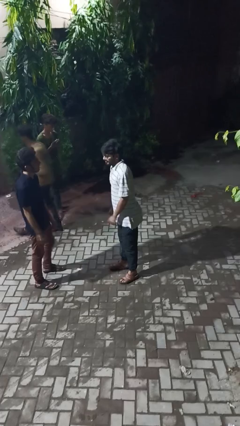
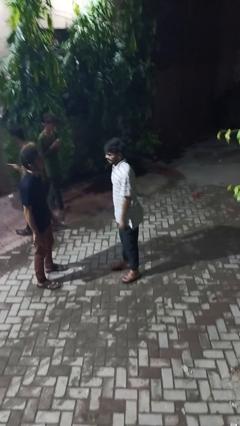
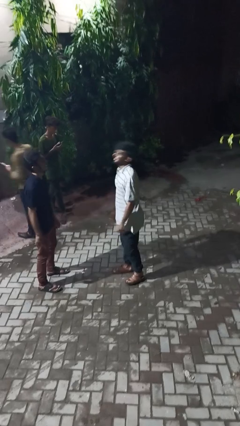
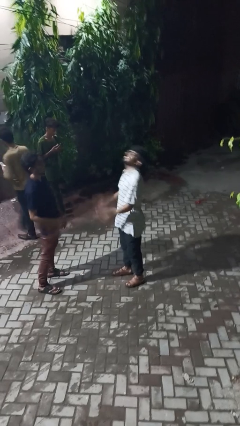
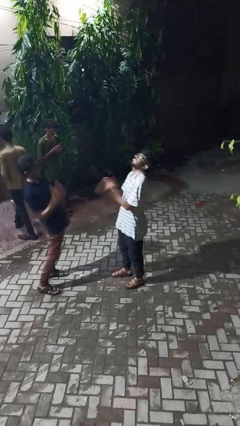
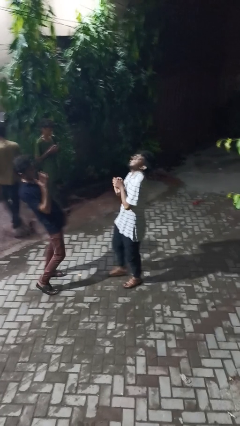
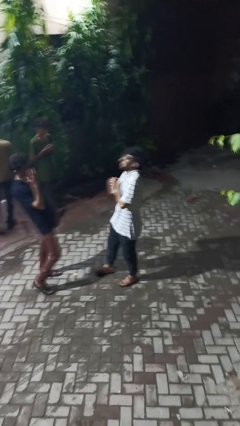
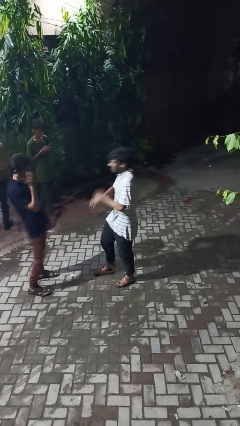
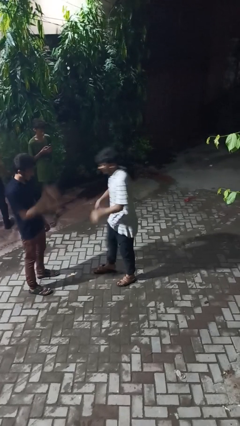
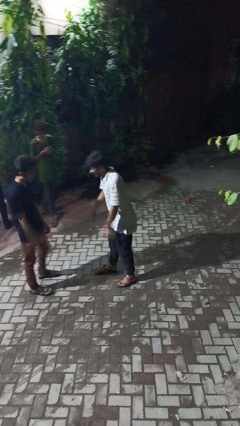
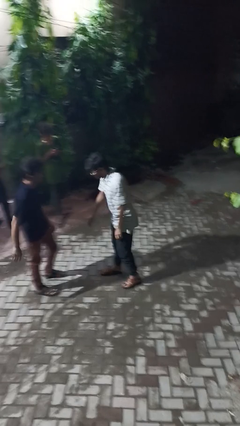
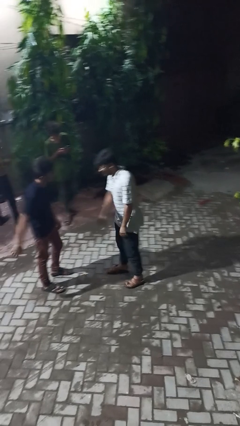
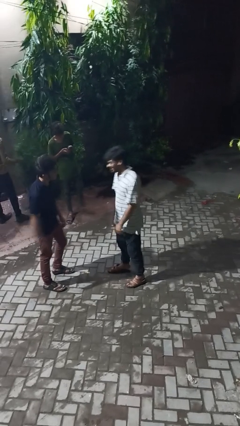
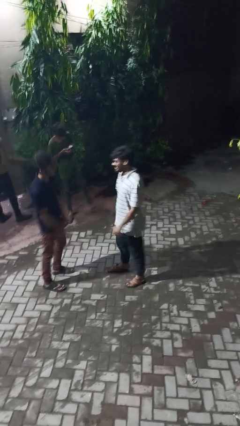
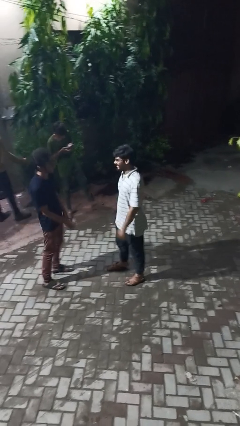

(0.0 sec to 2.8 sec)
person laughs with person

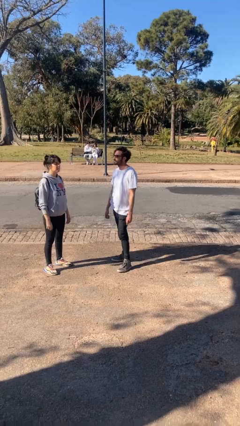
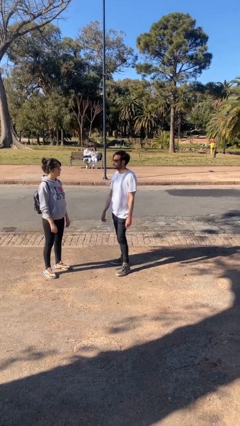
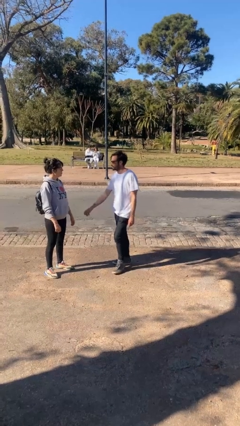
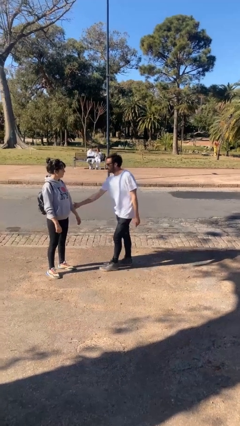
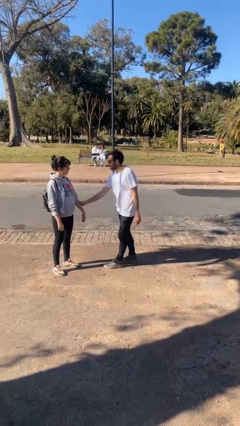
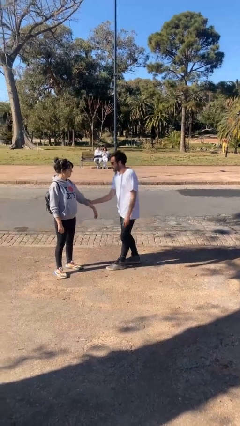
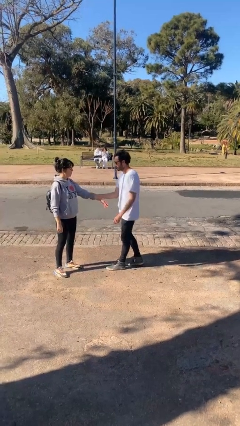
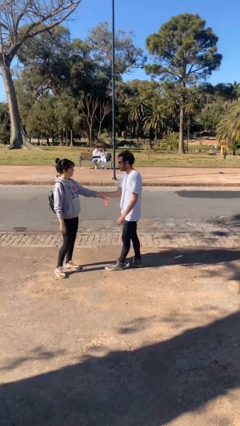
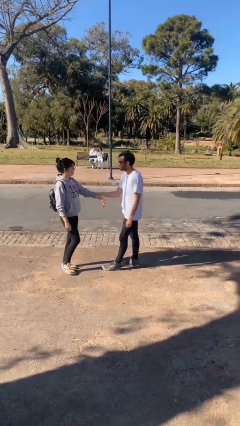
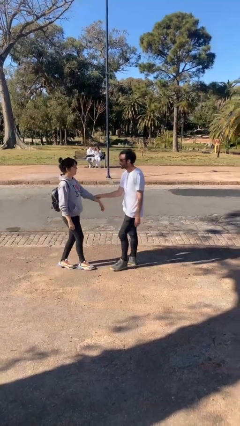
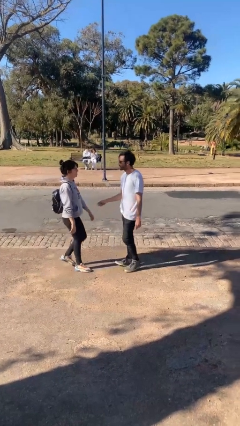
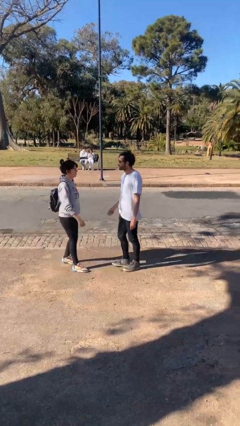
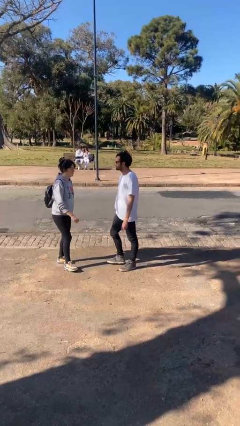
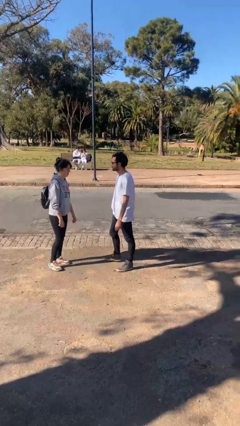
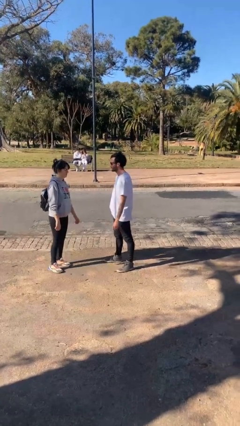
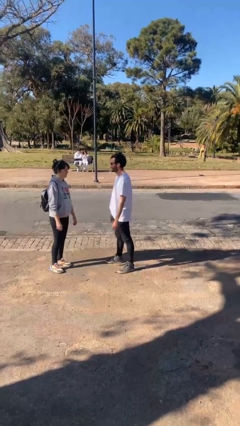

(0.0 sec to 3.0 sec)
person grabs person by forearm

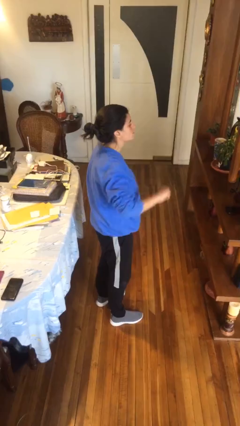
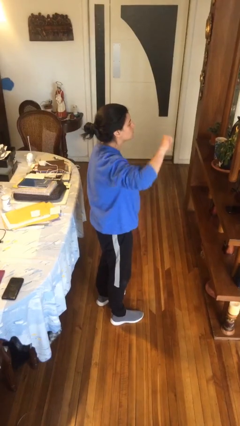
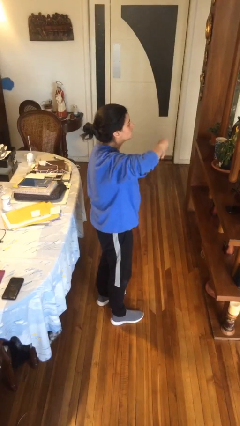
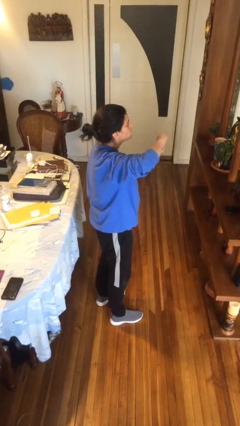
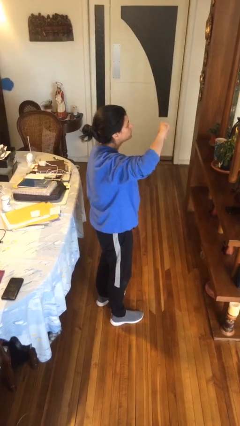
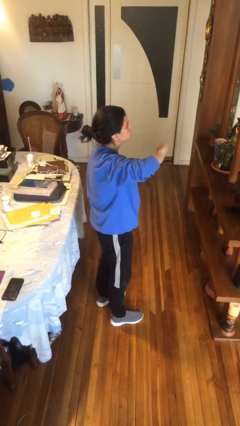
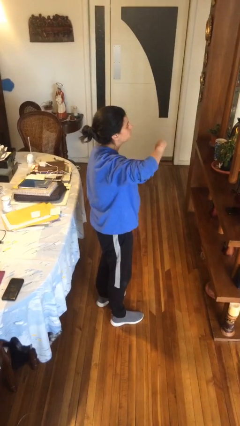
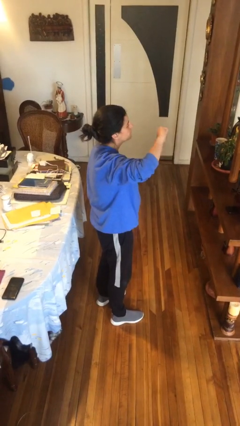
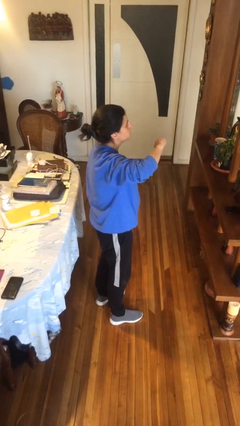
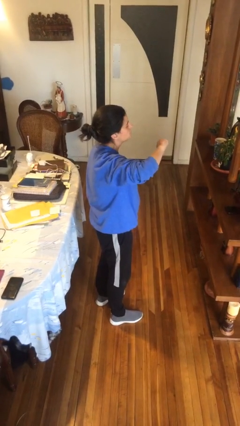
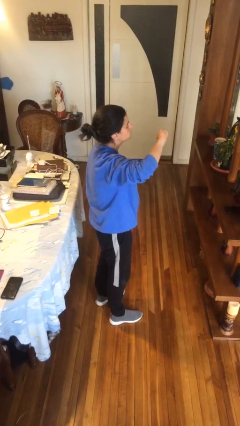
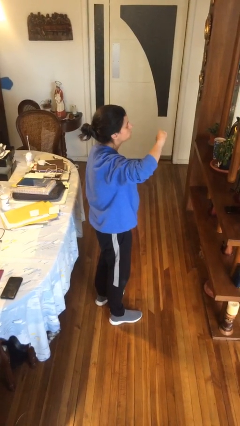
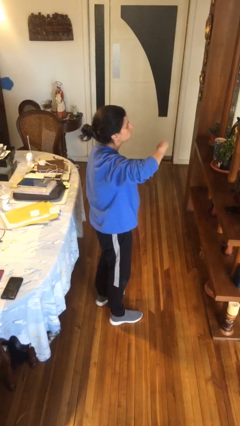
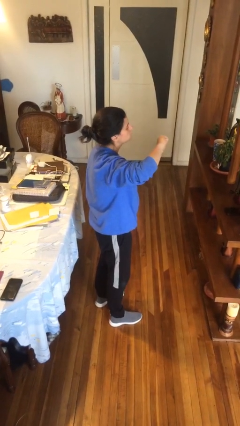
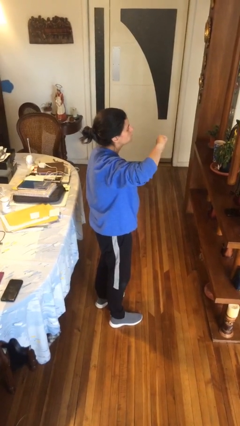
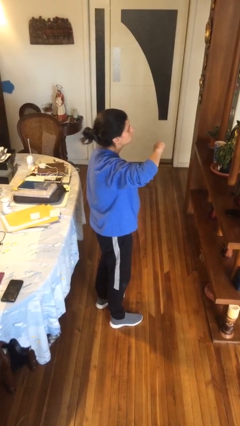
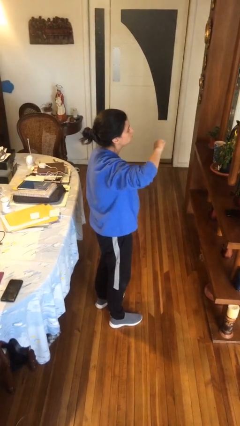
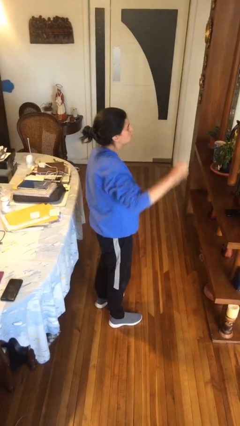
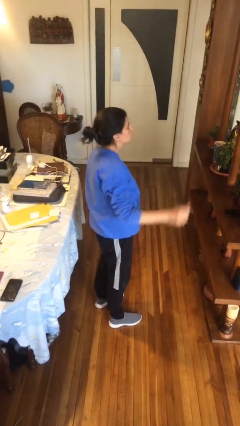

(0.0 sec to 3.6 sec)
person gestures thumbs down

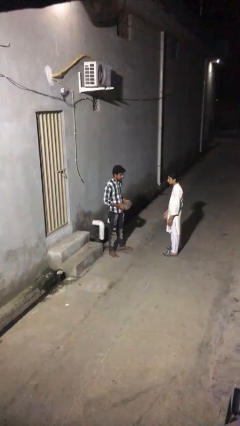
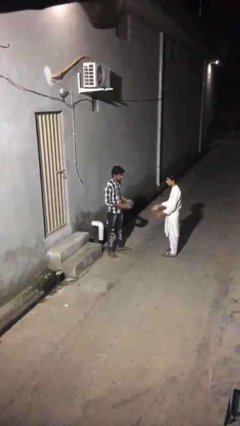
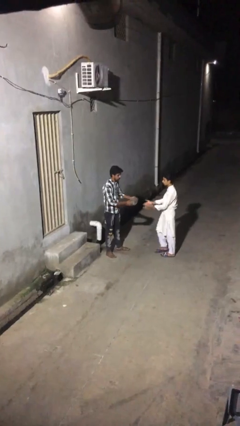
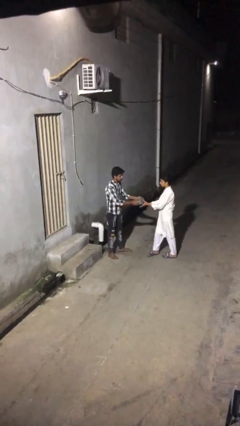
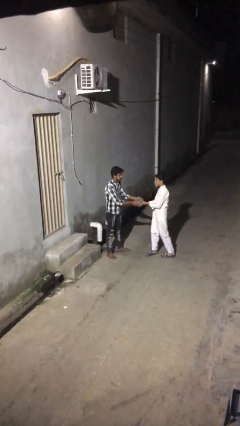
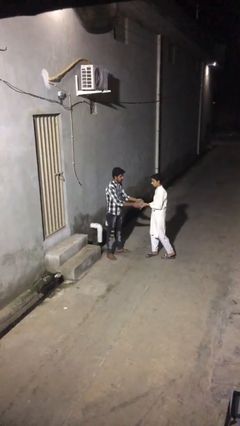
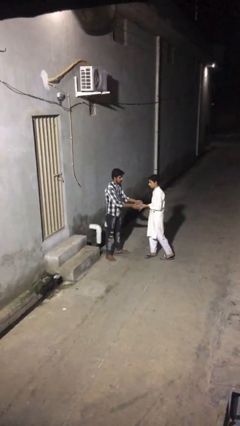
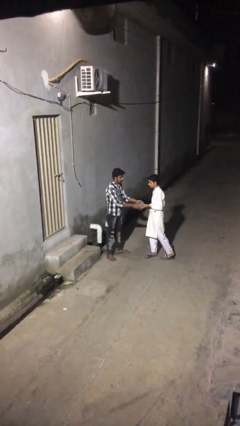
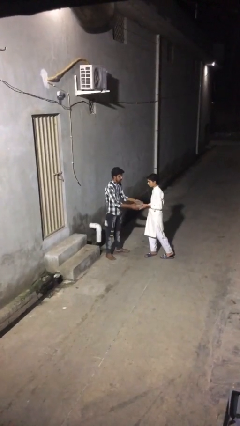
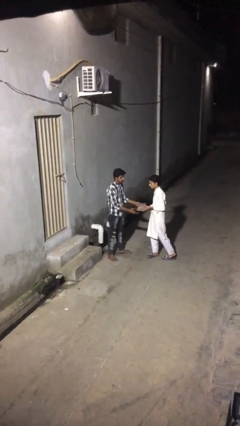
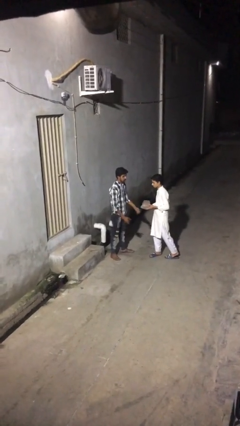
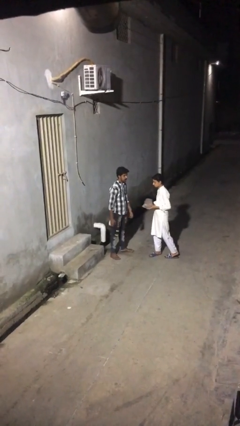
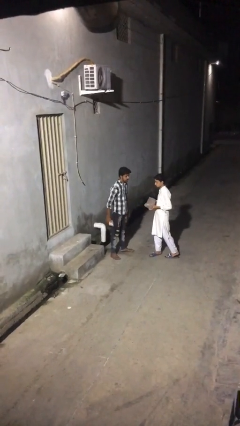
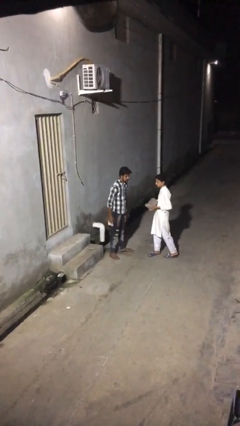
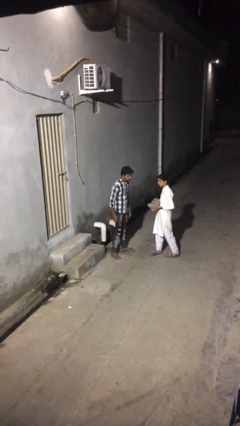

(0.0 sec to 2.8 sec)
person transfers object to person

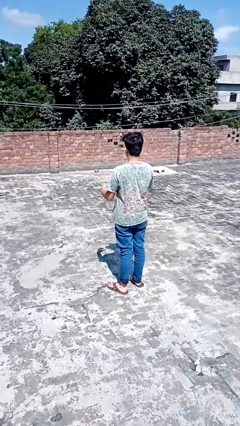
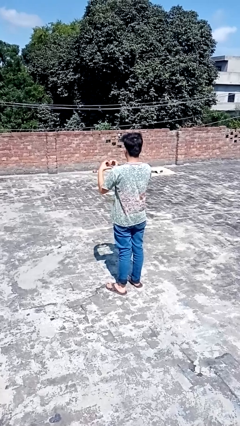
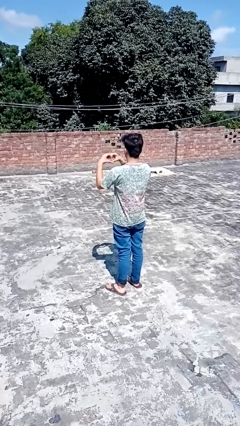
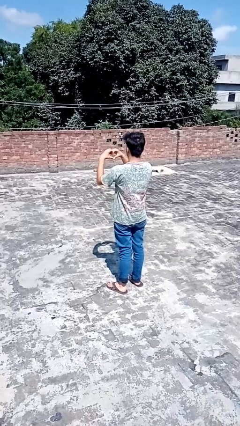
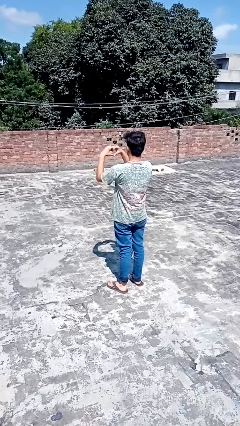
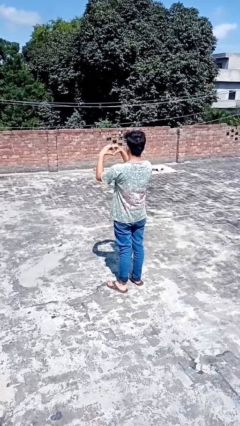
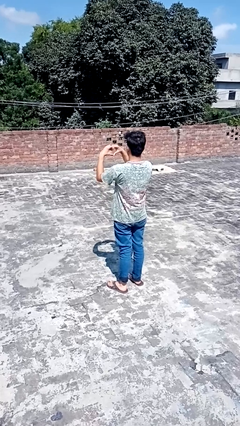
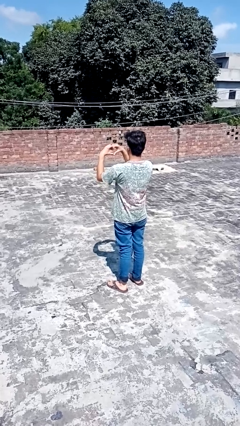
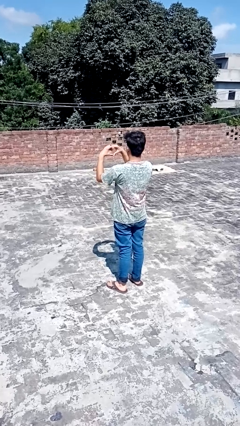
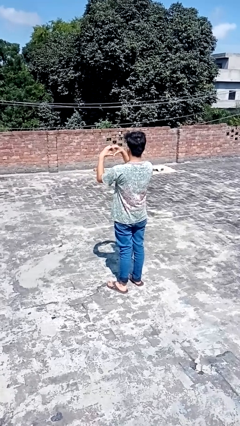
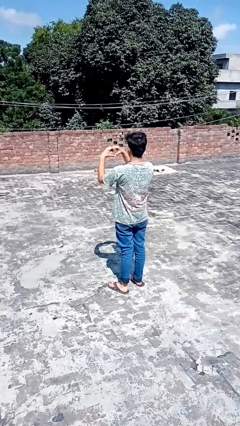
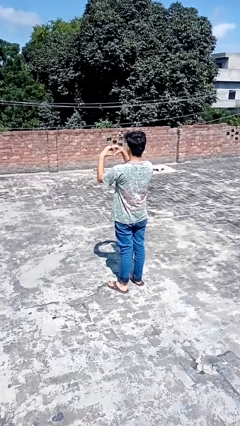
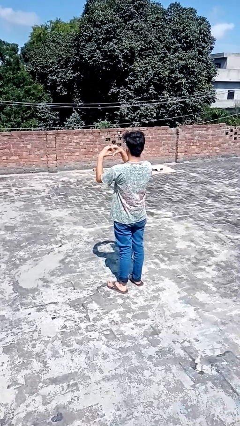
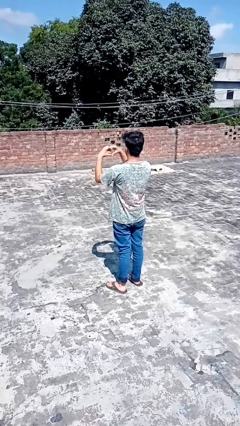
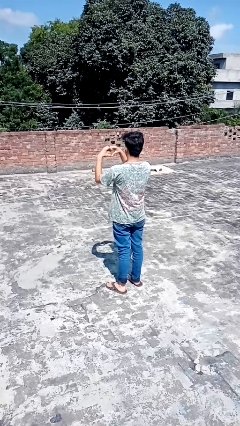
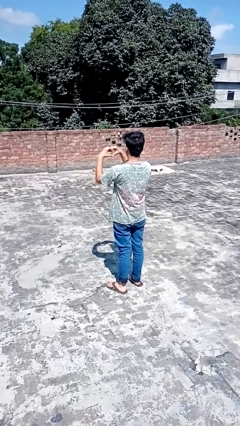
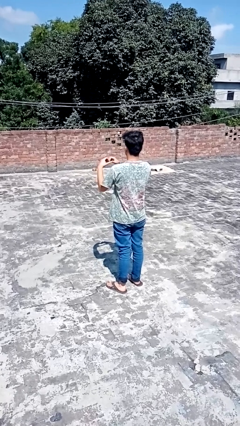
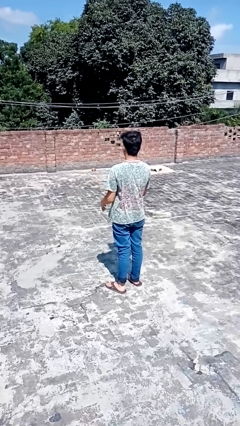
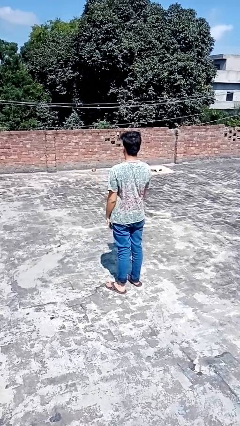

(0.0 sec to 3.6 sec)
person gestures heart

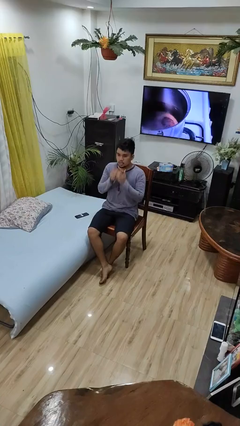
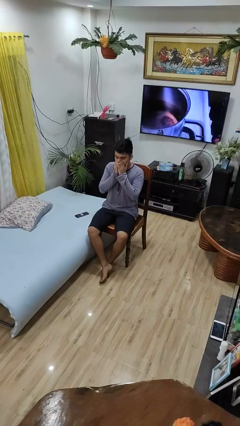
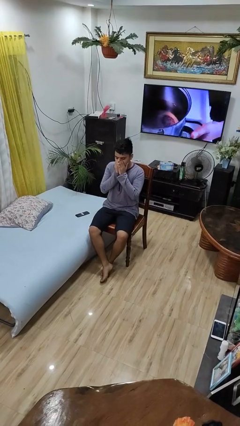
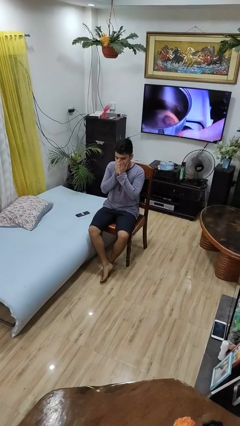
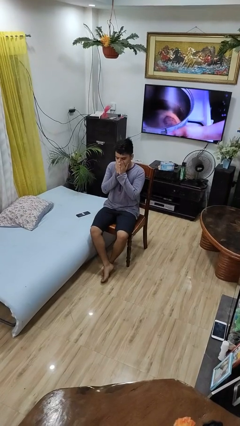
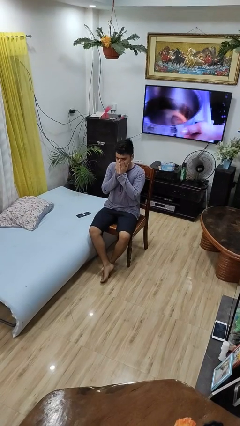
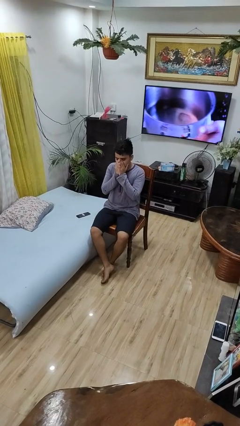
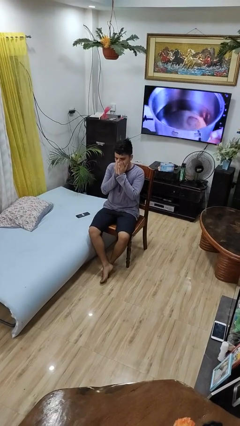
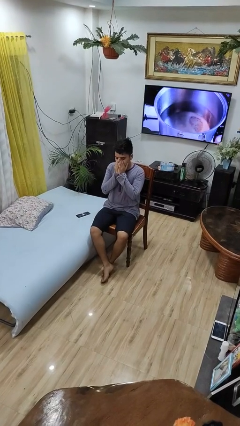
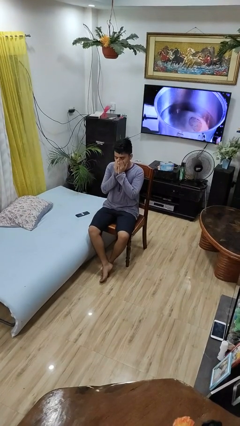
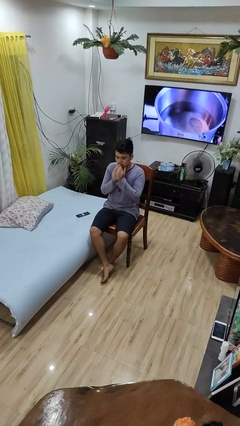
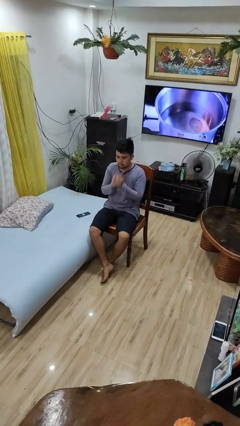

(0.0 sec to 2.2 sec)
person sneezes into hand
